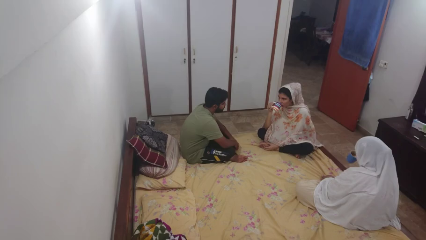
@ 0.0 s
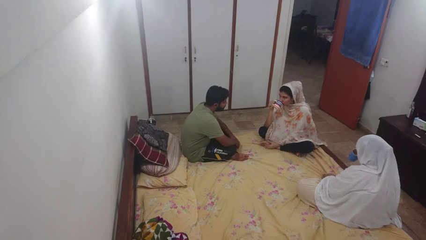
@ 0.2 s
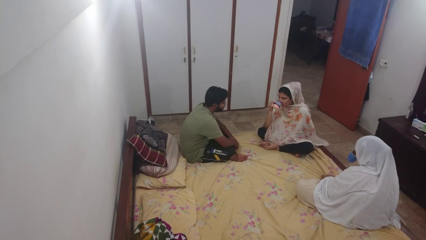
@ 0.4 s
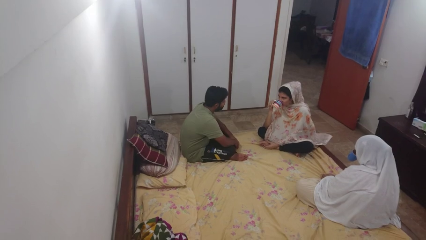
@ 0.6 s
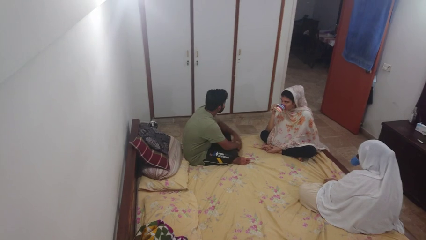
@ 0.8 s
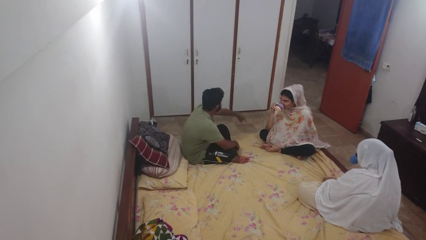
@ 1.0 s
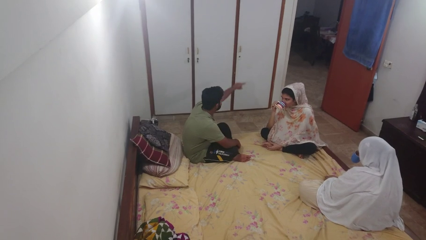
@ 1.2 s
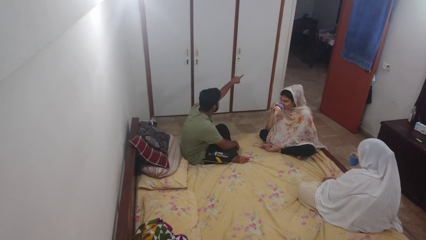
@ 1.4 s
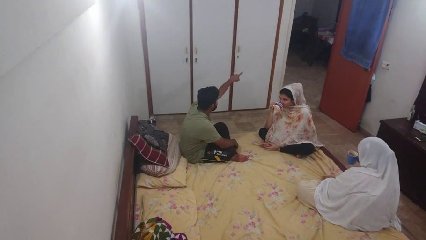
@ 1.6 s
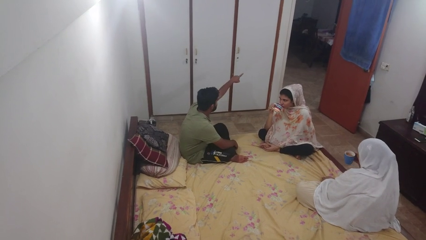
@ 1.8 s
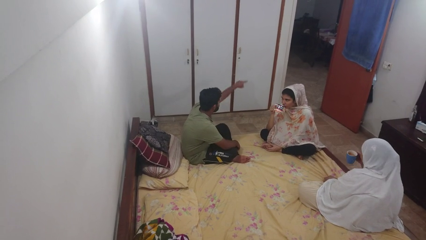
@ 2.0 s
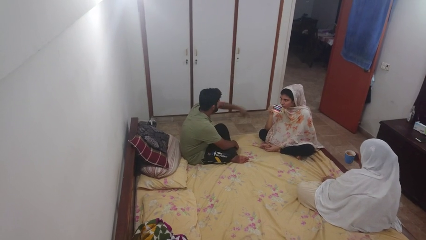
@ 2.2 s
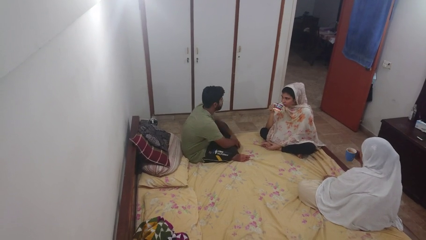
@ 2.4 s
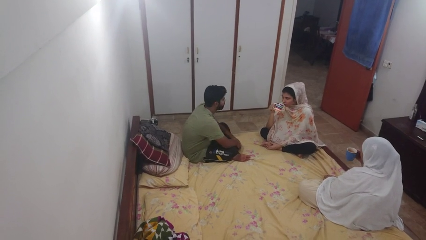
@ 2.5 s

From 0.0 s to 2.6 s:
person points at person

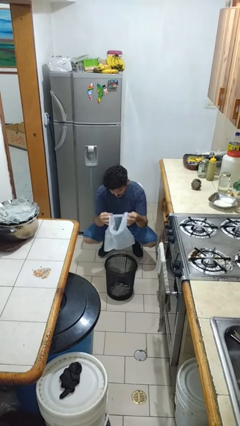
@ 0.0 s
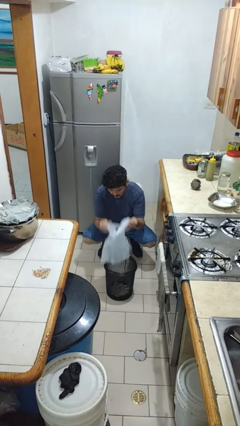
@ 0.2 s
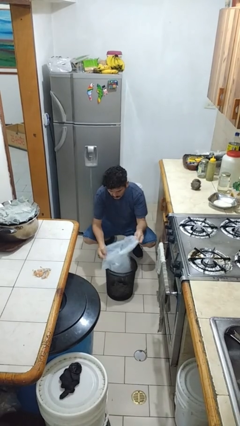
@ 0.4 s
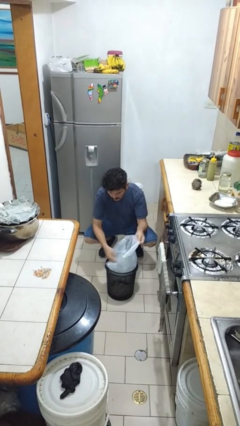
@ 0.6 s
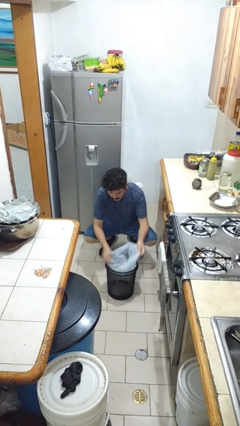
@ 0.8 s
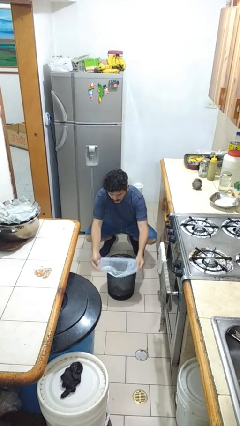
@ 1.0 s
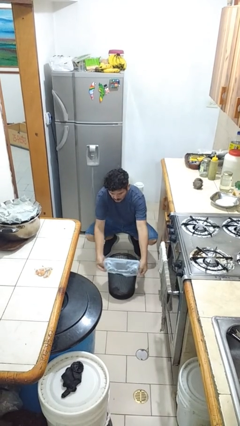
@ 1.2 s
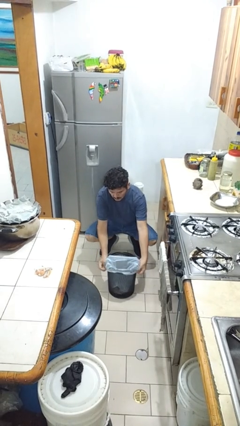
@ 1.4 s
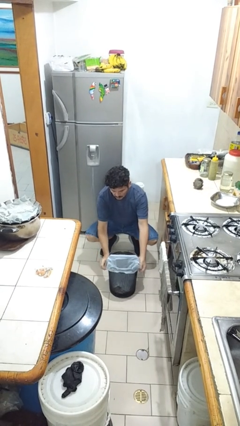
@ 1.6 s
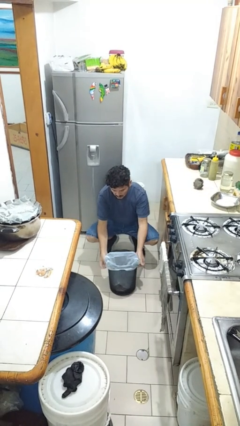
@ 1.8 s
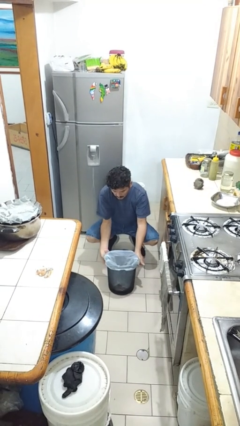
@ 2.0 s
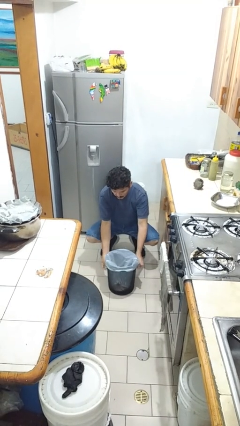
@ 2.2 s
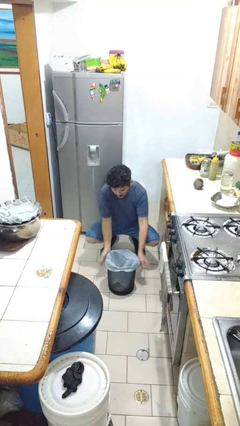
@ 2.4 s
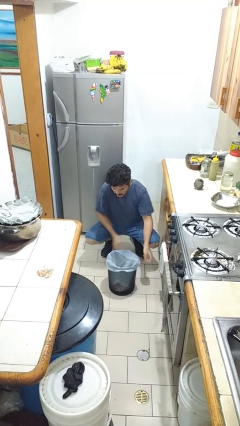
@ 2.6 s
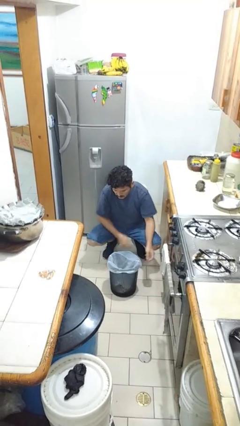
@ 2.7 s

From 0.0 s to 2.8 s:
person inserts trashbag into trashcan

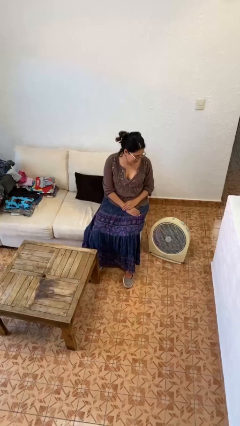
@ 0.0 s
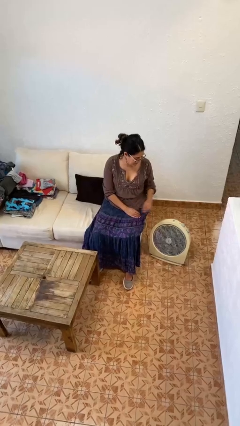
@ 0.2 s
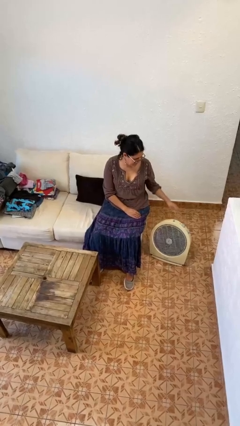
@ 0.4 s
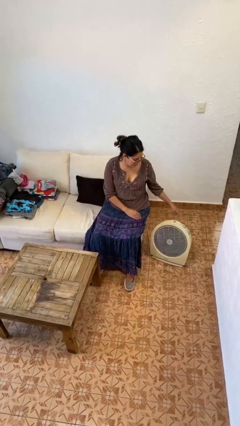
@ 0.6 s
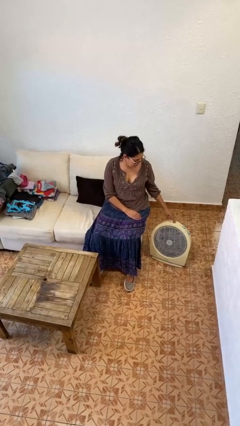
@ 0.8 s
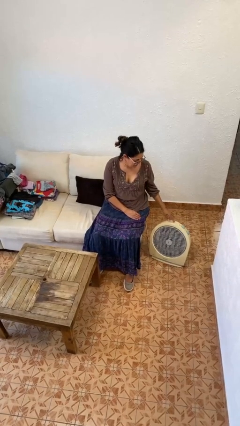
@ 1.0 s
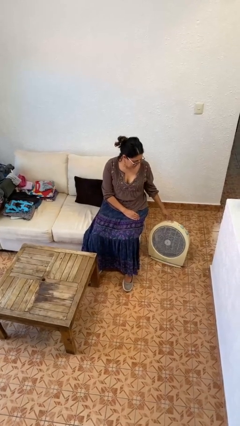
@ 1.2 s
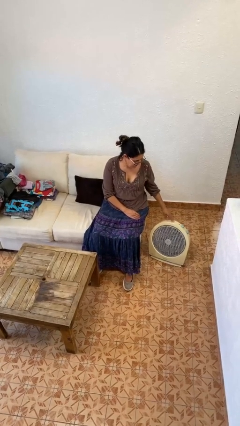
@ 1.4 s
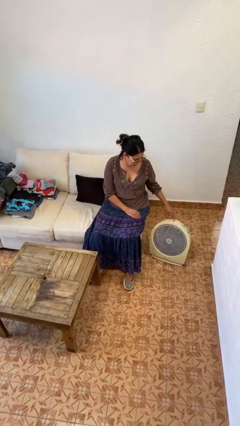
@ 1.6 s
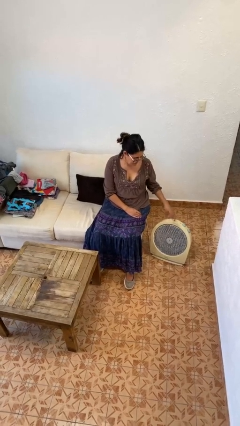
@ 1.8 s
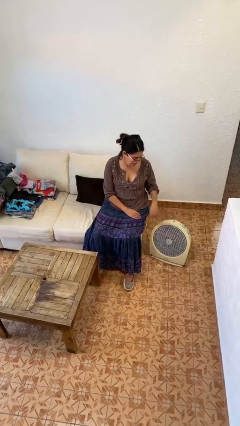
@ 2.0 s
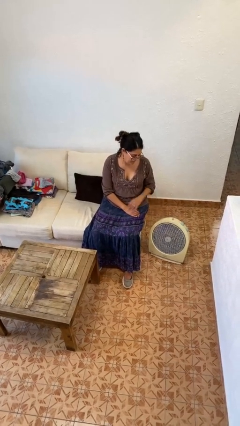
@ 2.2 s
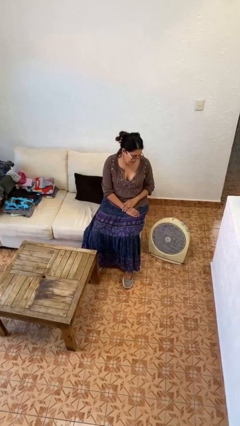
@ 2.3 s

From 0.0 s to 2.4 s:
person turns off fan

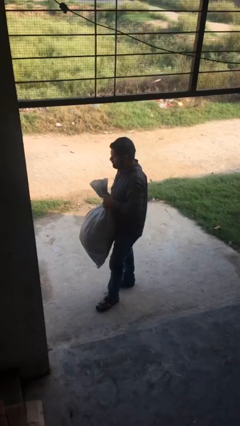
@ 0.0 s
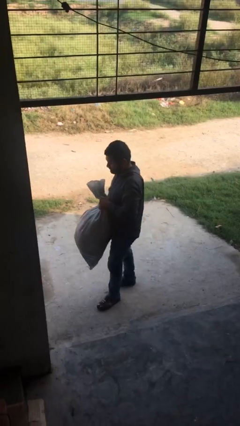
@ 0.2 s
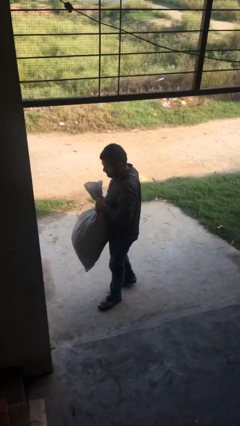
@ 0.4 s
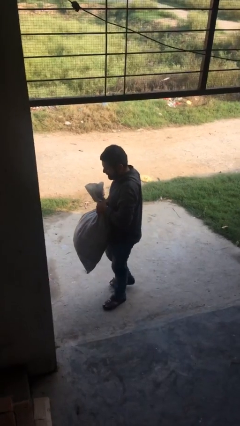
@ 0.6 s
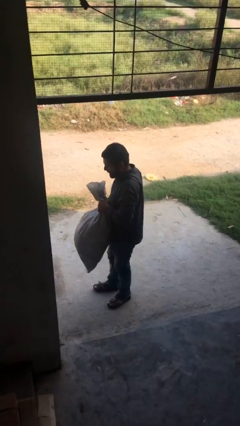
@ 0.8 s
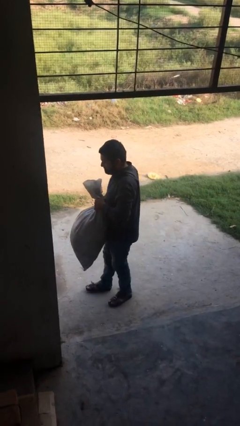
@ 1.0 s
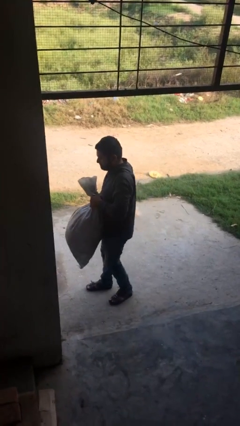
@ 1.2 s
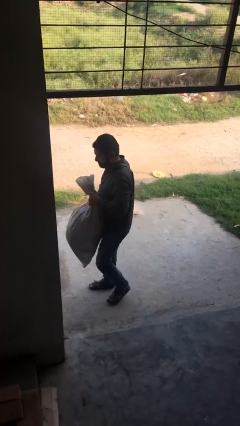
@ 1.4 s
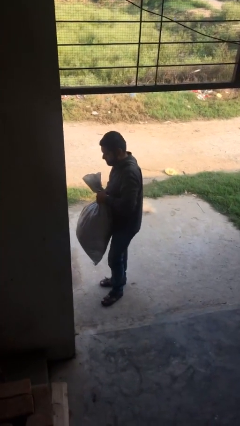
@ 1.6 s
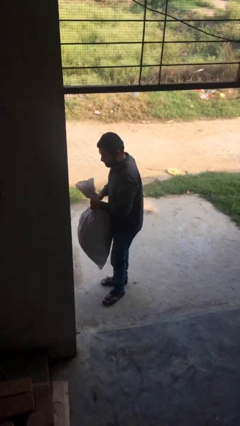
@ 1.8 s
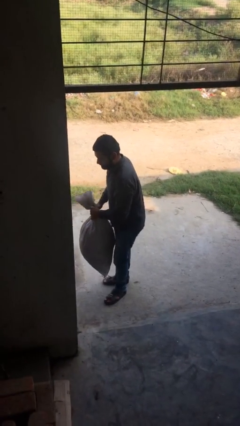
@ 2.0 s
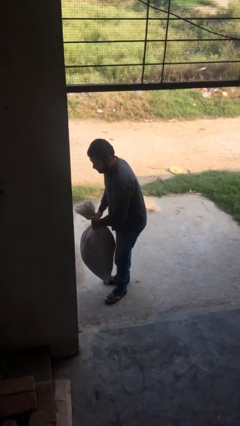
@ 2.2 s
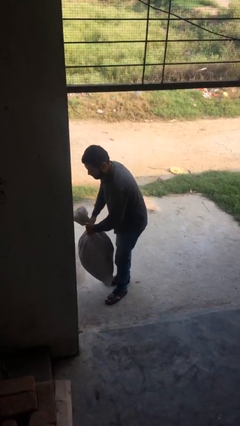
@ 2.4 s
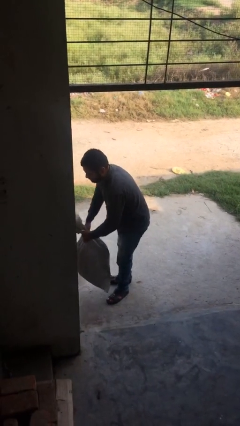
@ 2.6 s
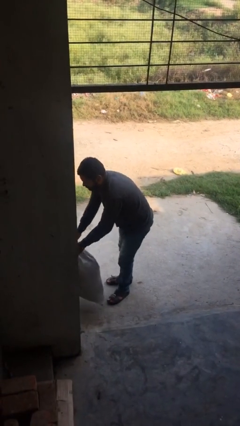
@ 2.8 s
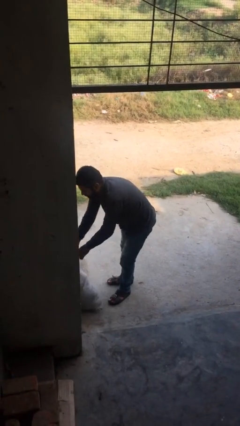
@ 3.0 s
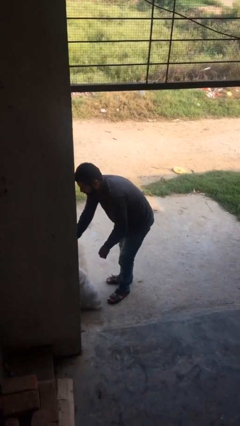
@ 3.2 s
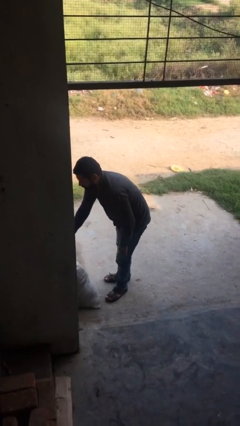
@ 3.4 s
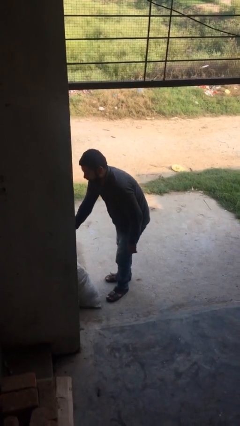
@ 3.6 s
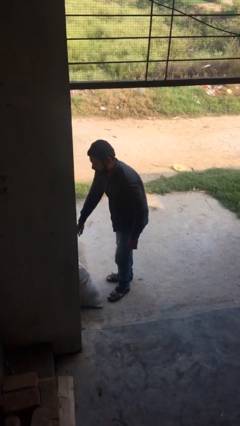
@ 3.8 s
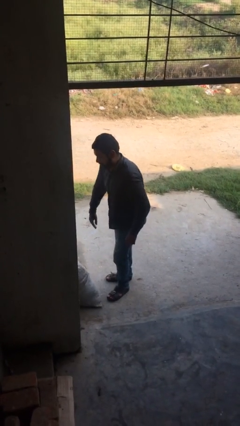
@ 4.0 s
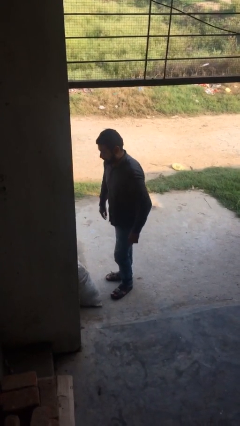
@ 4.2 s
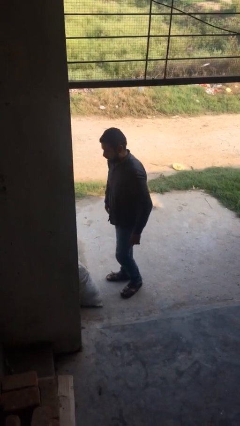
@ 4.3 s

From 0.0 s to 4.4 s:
person puts down object on floor

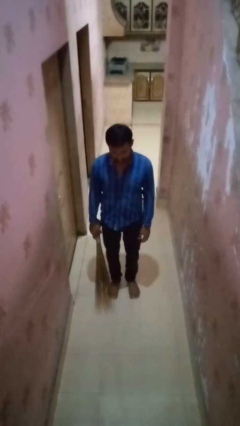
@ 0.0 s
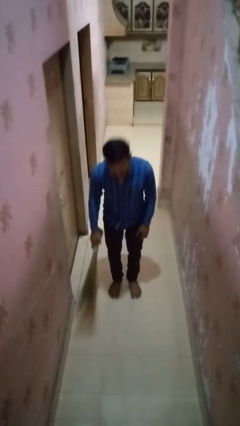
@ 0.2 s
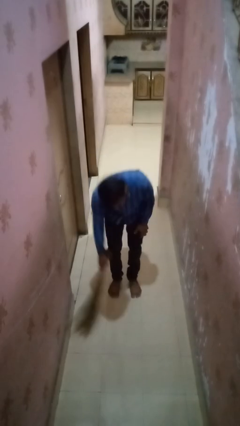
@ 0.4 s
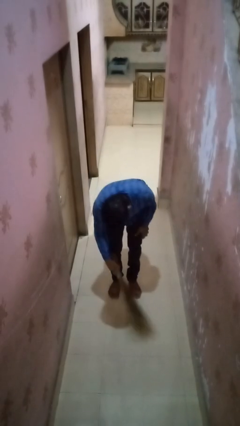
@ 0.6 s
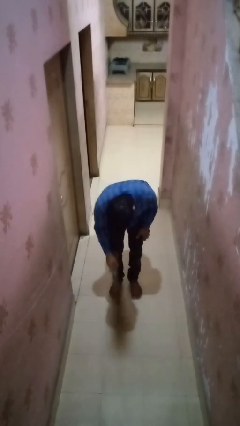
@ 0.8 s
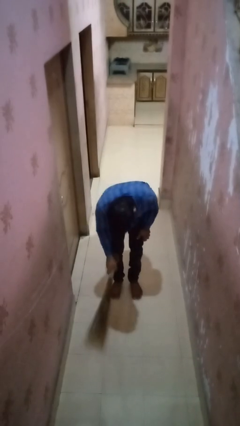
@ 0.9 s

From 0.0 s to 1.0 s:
person sweeps floor

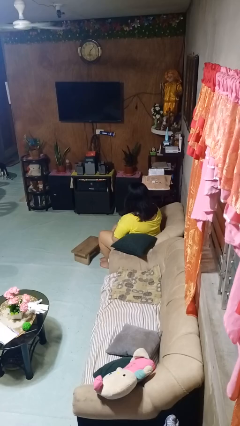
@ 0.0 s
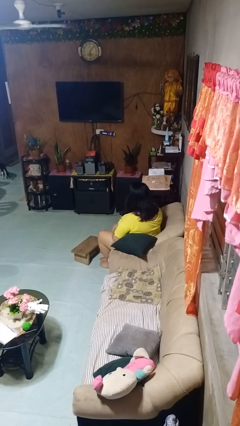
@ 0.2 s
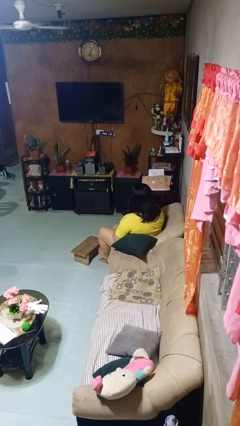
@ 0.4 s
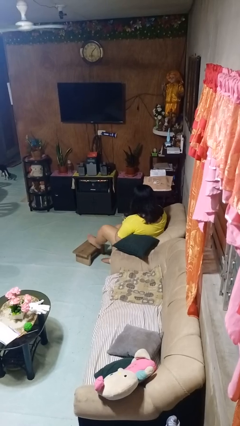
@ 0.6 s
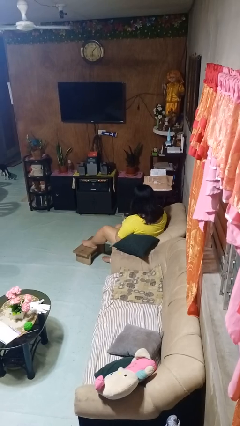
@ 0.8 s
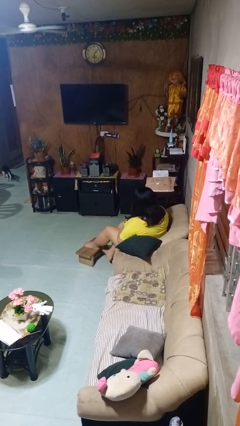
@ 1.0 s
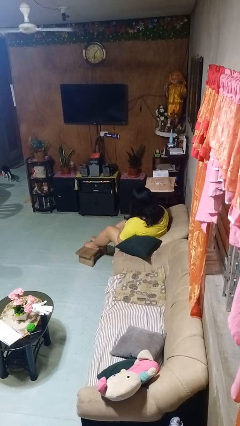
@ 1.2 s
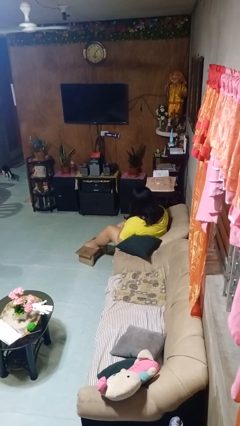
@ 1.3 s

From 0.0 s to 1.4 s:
person puts feet up

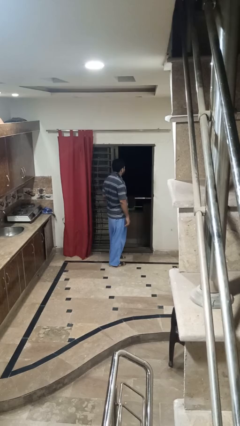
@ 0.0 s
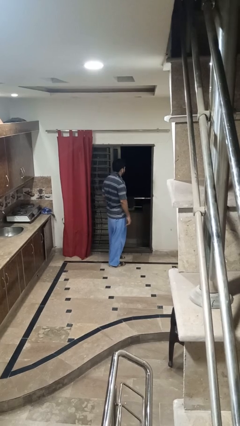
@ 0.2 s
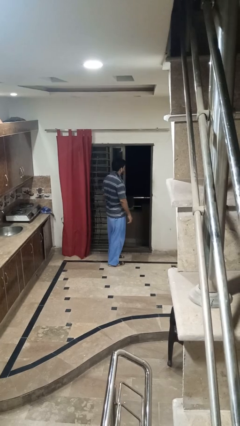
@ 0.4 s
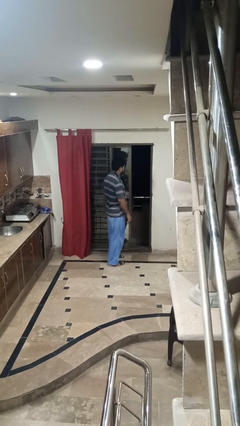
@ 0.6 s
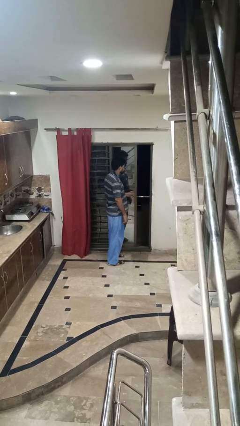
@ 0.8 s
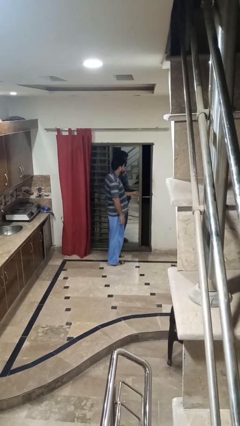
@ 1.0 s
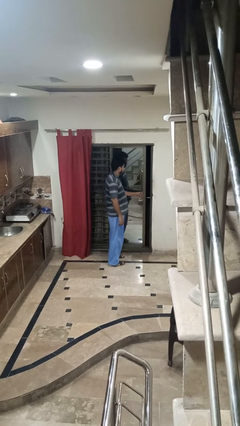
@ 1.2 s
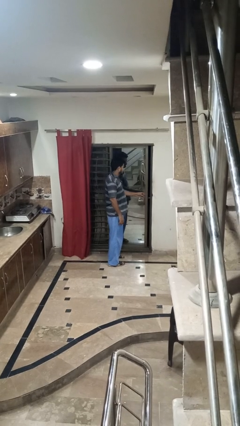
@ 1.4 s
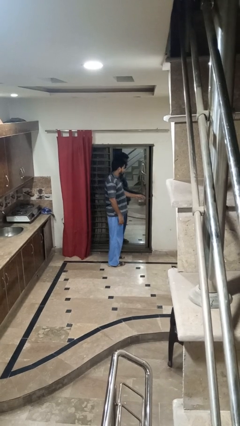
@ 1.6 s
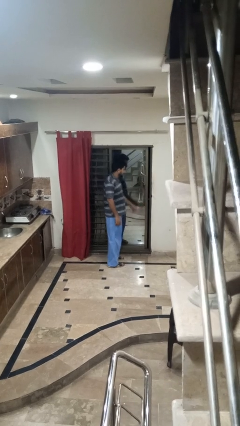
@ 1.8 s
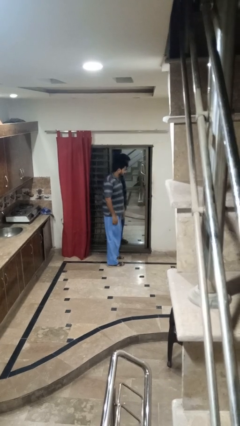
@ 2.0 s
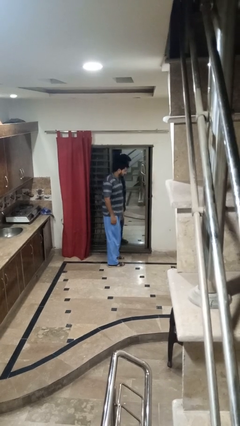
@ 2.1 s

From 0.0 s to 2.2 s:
person closes sliding door

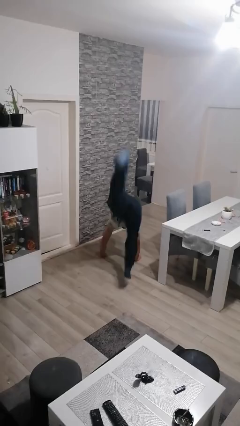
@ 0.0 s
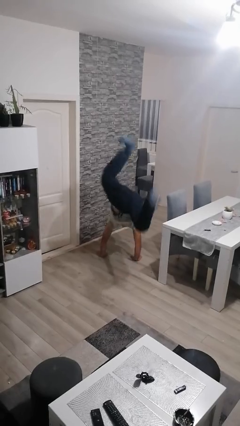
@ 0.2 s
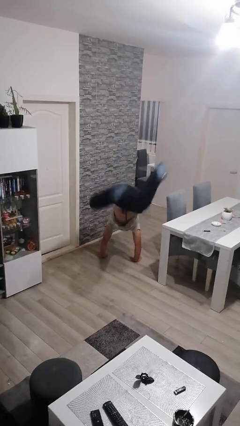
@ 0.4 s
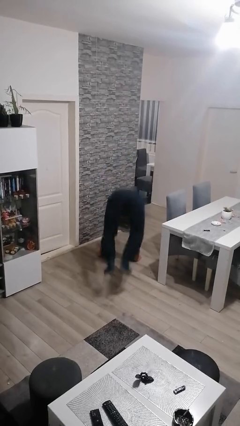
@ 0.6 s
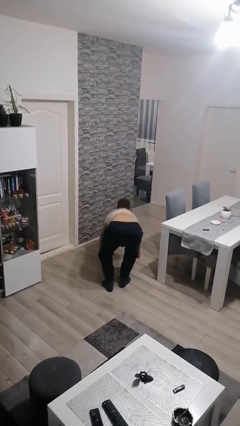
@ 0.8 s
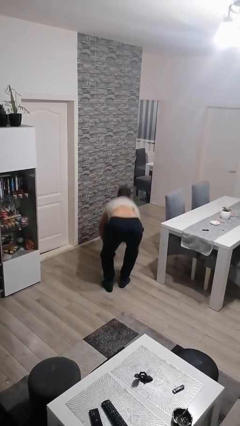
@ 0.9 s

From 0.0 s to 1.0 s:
person handstand
